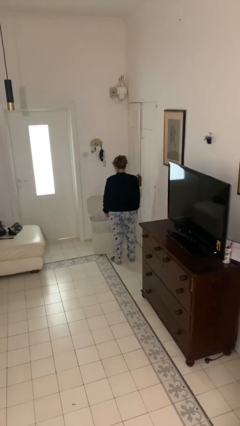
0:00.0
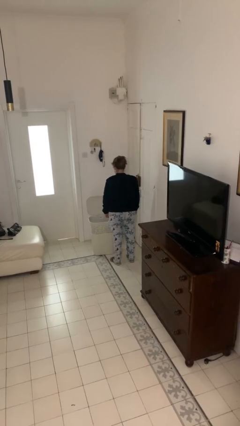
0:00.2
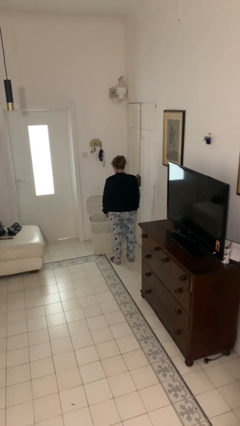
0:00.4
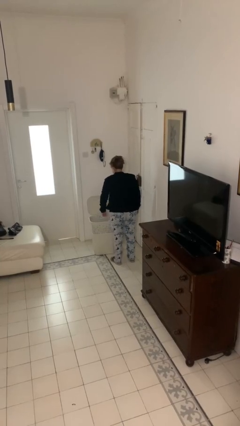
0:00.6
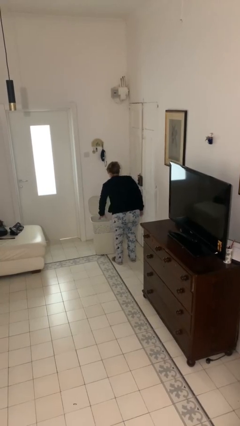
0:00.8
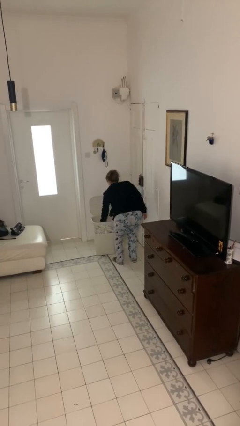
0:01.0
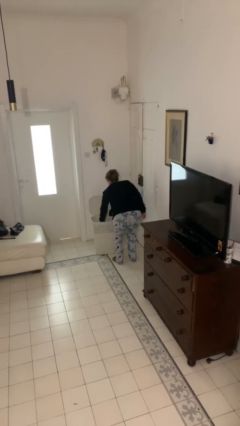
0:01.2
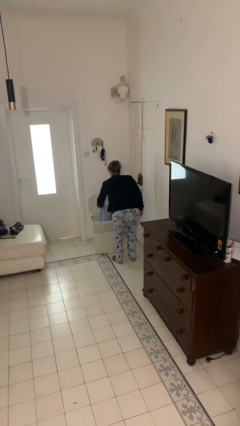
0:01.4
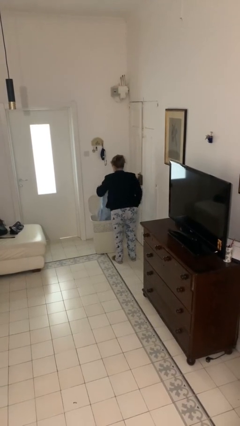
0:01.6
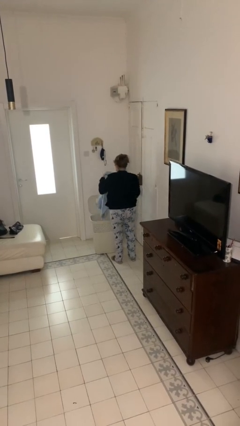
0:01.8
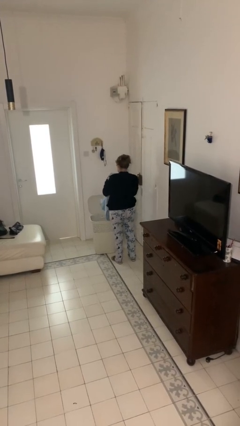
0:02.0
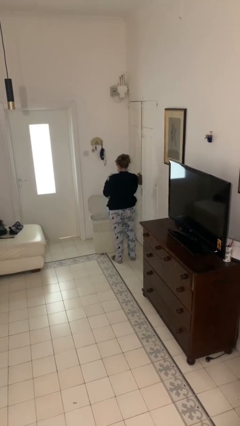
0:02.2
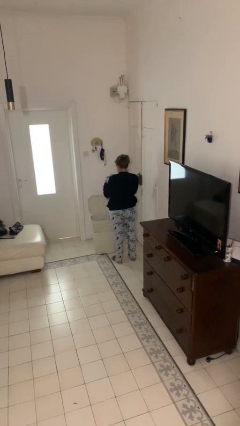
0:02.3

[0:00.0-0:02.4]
person takes object from basket

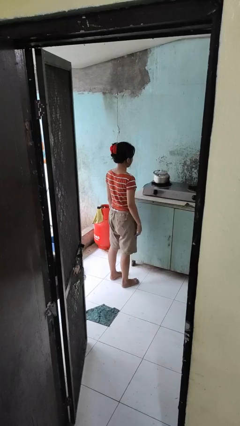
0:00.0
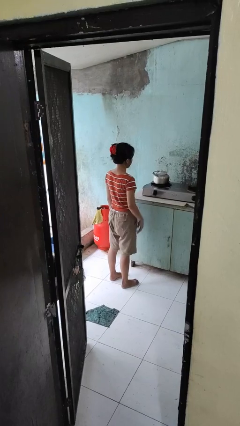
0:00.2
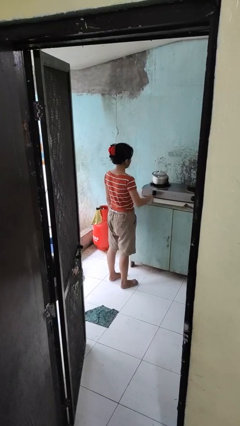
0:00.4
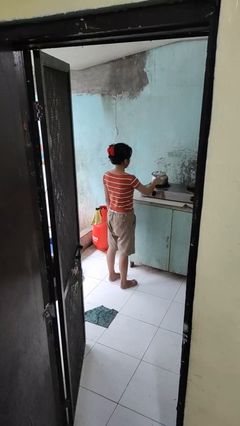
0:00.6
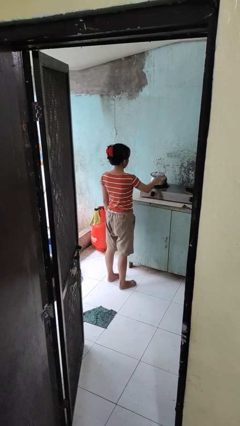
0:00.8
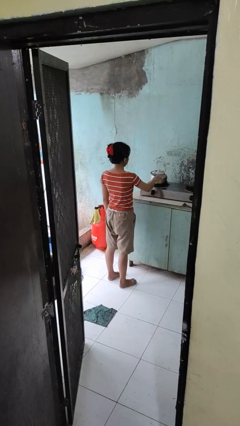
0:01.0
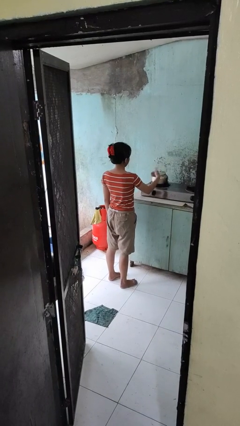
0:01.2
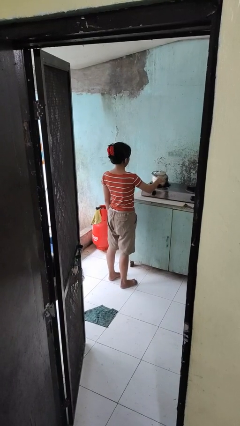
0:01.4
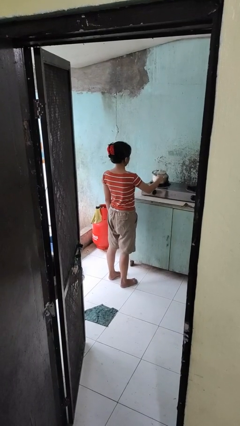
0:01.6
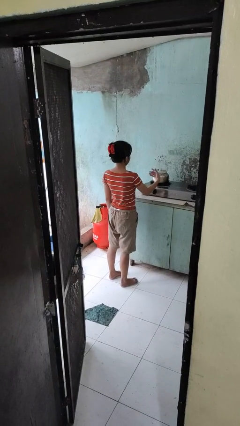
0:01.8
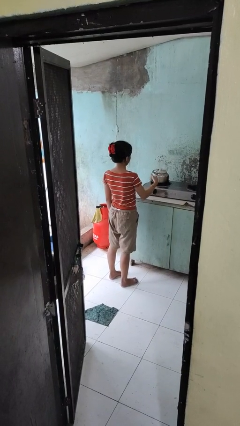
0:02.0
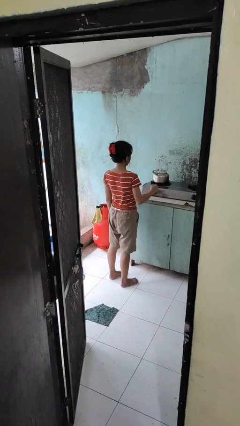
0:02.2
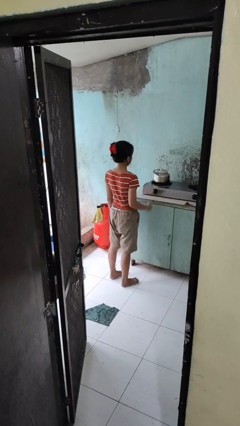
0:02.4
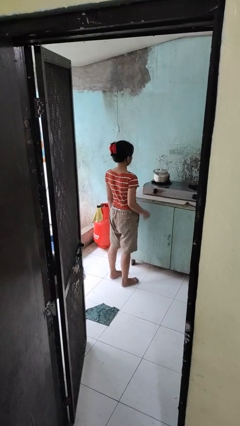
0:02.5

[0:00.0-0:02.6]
person burns hand

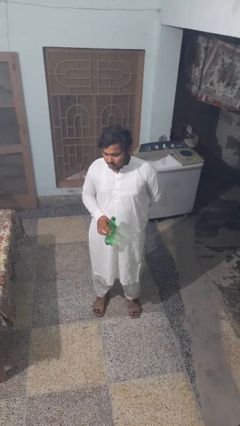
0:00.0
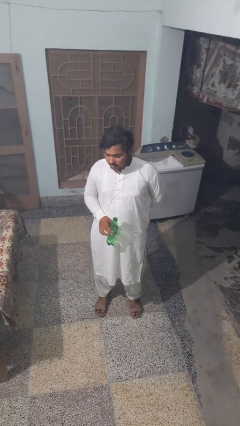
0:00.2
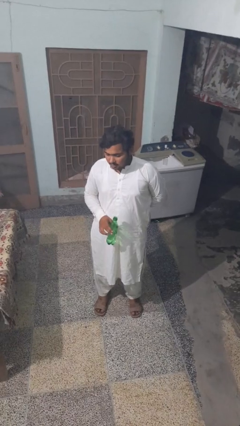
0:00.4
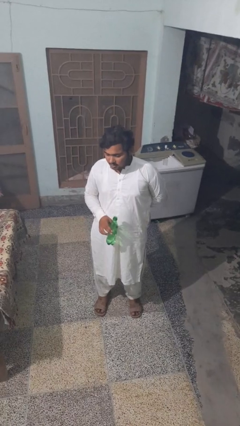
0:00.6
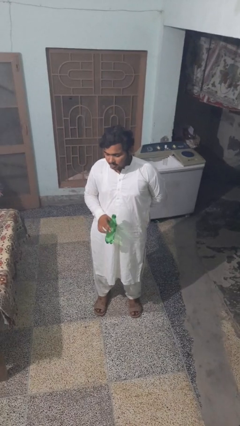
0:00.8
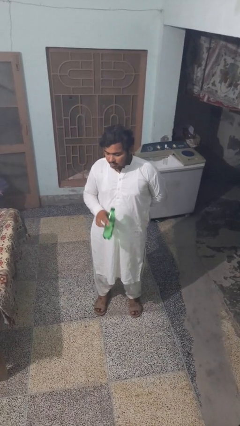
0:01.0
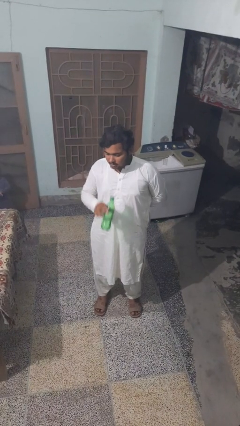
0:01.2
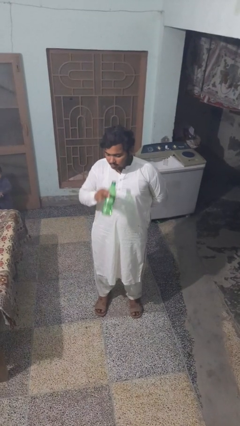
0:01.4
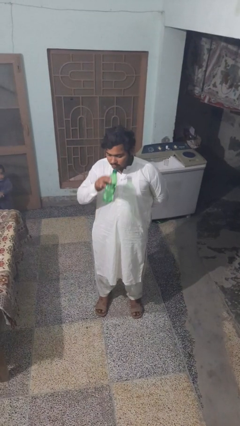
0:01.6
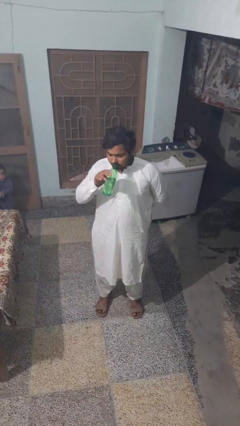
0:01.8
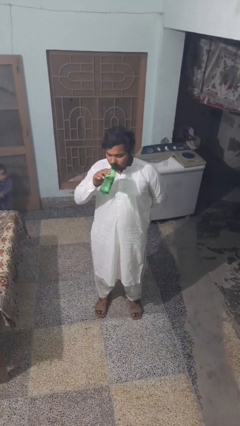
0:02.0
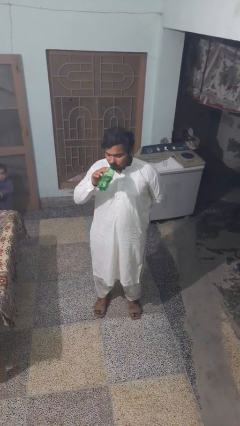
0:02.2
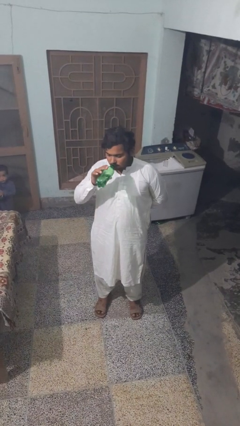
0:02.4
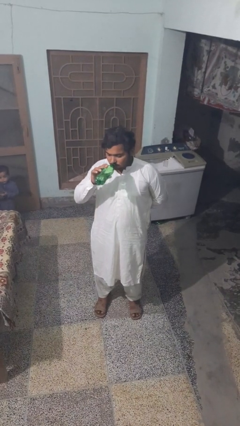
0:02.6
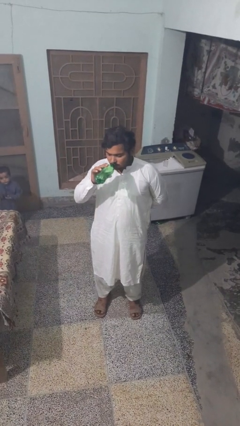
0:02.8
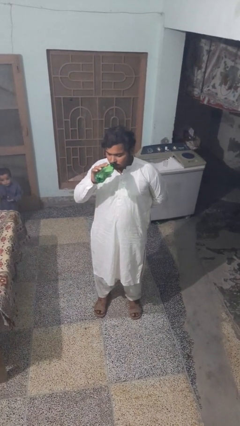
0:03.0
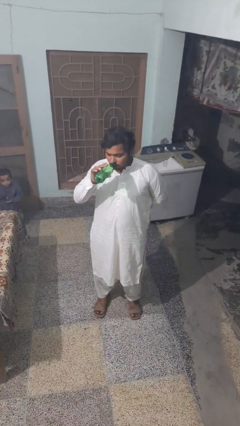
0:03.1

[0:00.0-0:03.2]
person drinks from bottle

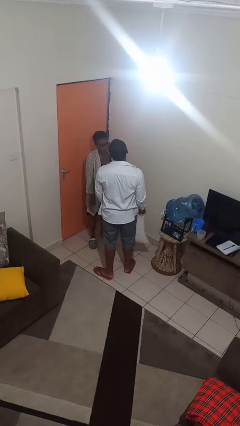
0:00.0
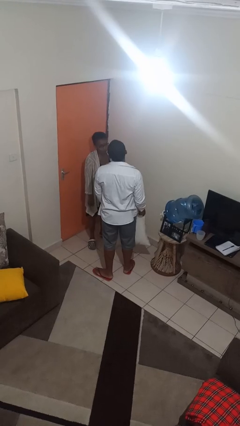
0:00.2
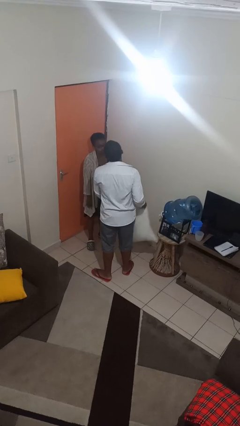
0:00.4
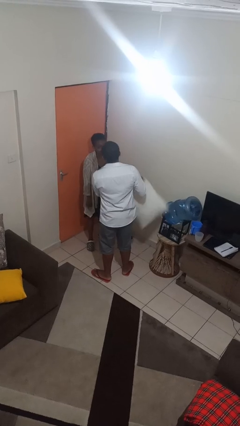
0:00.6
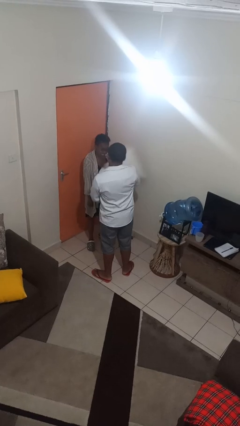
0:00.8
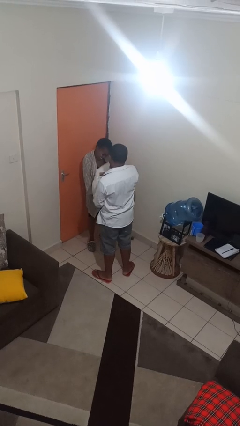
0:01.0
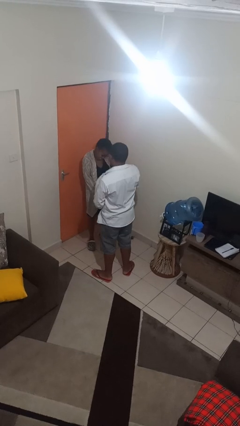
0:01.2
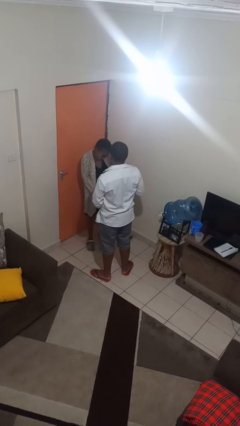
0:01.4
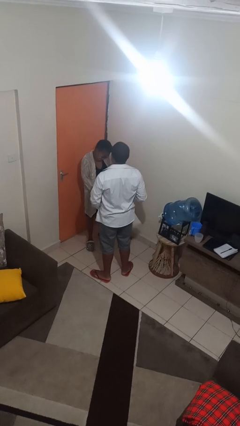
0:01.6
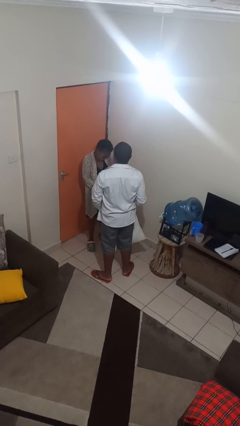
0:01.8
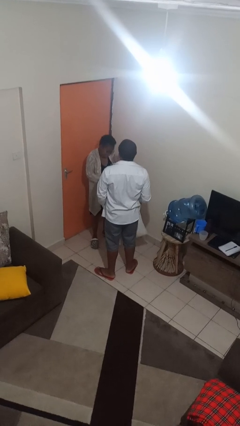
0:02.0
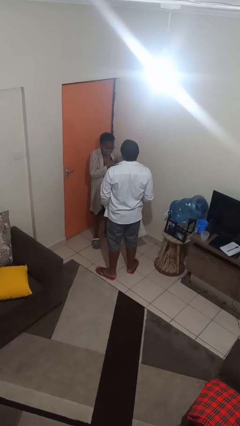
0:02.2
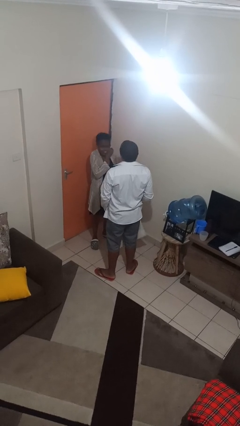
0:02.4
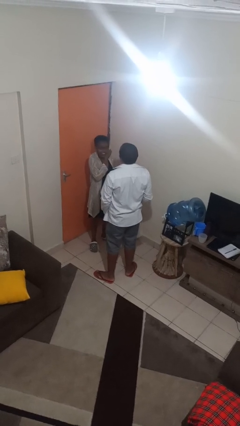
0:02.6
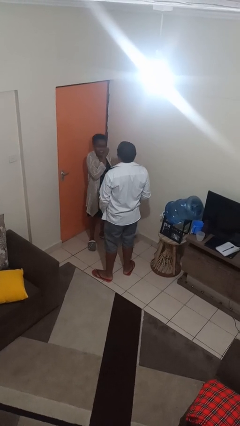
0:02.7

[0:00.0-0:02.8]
person hits person with pillow

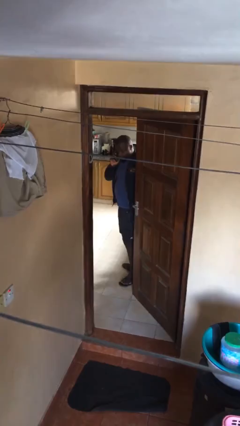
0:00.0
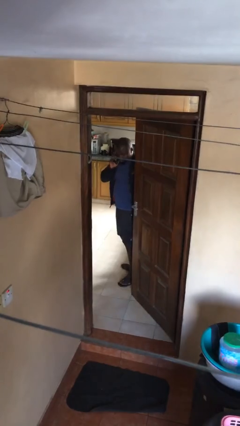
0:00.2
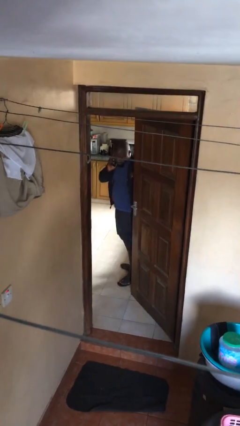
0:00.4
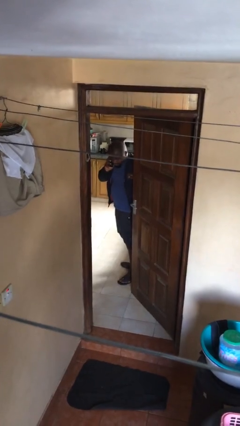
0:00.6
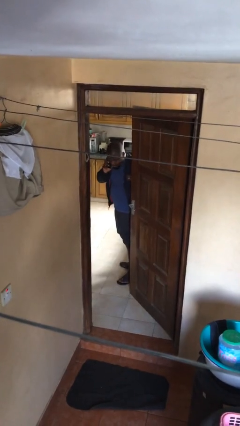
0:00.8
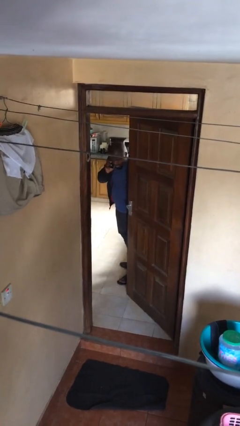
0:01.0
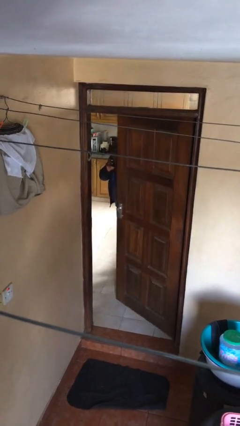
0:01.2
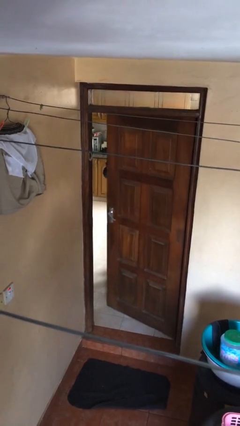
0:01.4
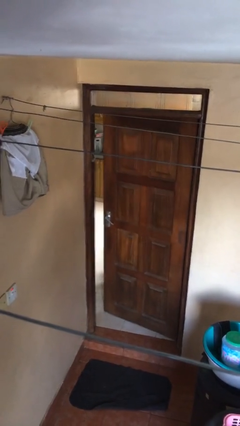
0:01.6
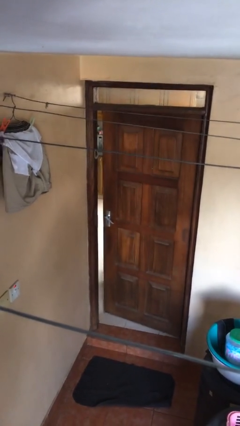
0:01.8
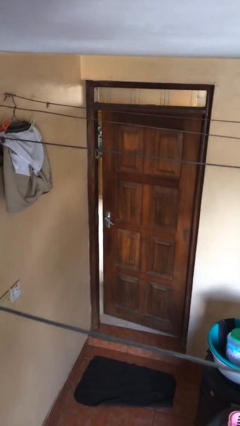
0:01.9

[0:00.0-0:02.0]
person closes facility door

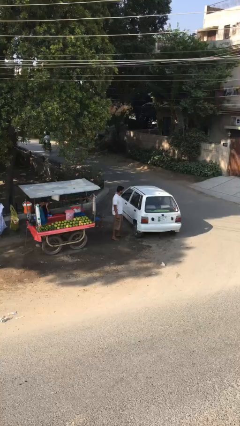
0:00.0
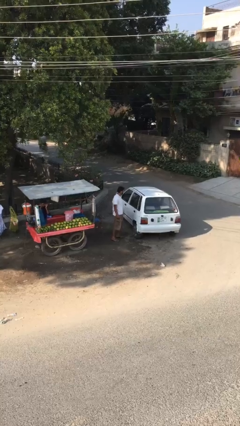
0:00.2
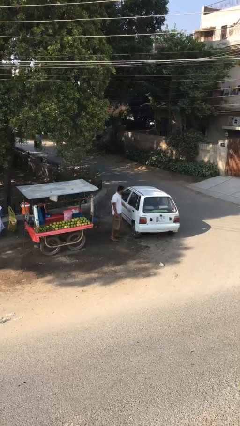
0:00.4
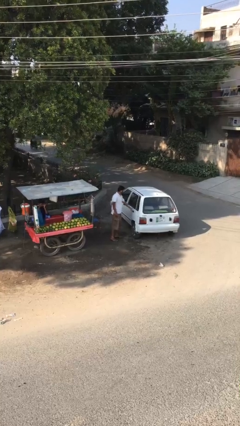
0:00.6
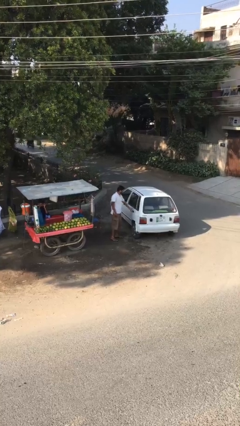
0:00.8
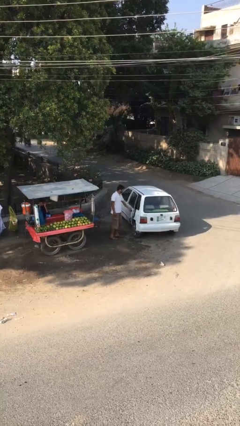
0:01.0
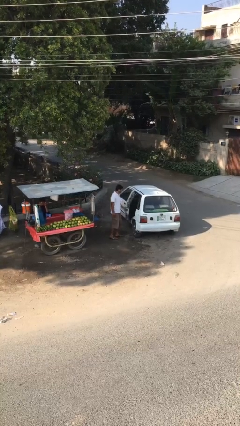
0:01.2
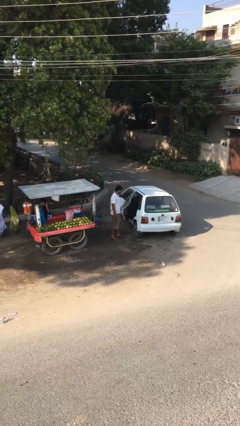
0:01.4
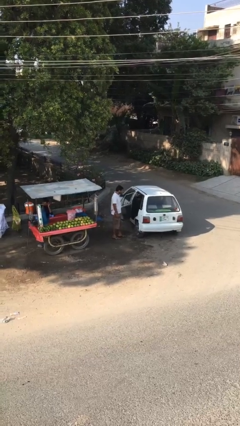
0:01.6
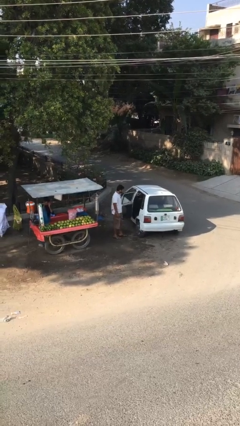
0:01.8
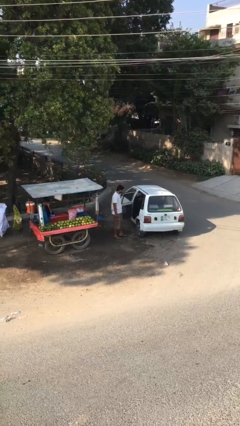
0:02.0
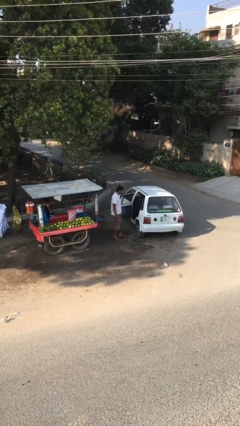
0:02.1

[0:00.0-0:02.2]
person opens car door

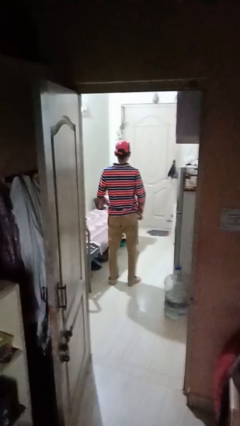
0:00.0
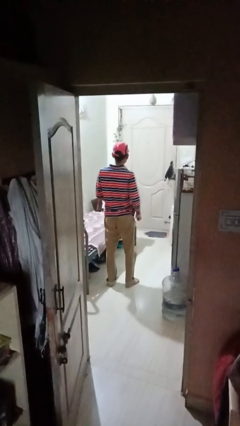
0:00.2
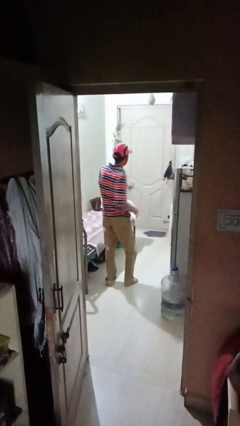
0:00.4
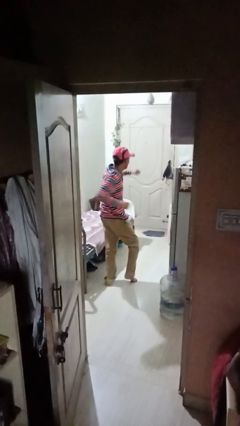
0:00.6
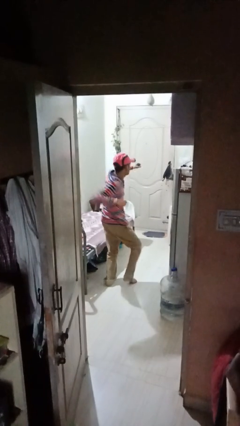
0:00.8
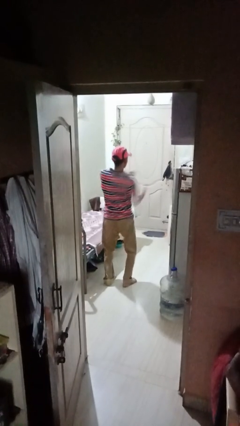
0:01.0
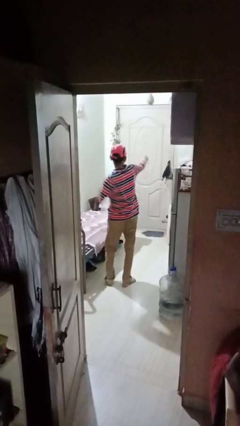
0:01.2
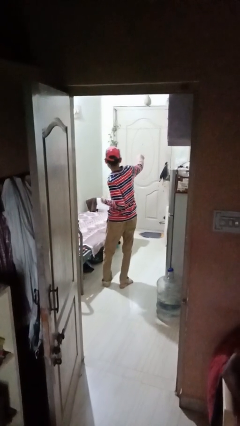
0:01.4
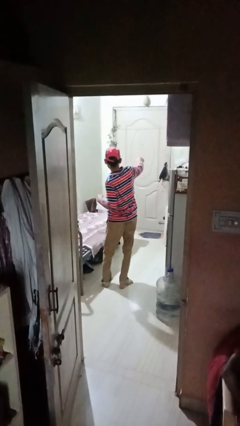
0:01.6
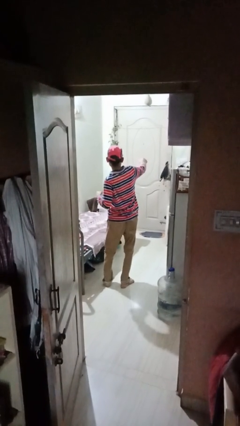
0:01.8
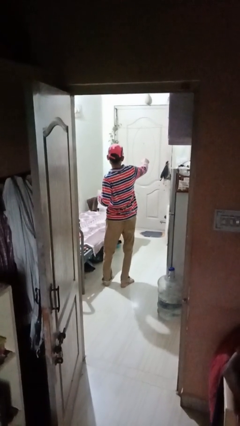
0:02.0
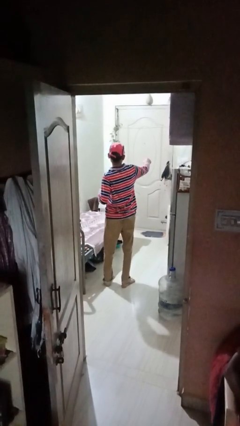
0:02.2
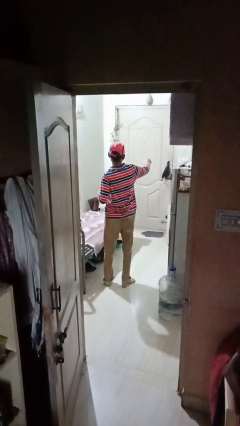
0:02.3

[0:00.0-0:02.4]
person punches
